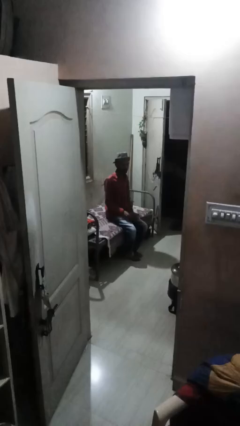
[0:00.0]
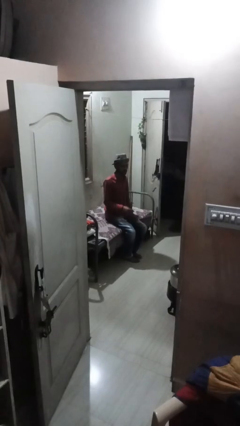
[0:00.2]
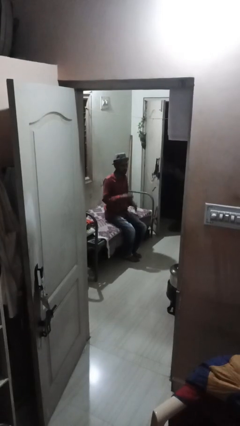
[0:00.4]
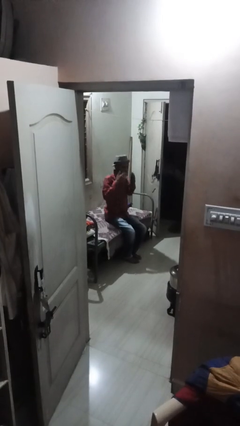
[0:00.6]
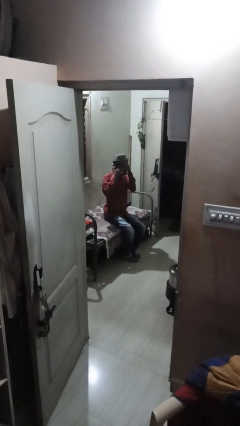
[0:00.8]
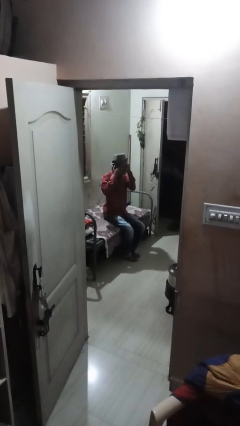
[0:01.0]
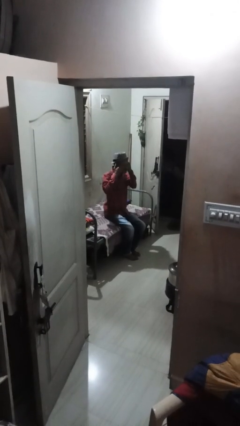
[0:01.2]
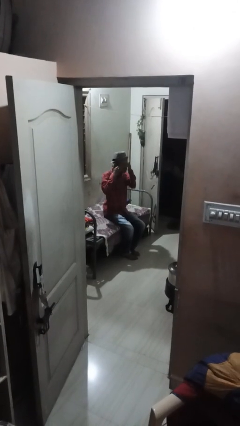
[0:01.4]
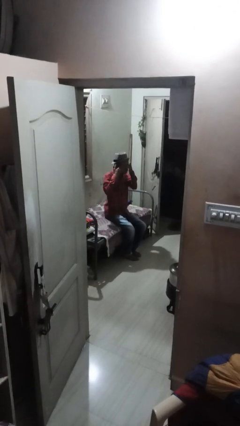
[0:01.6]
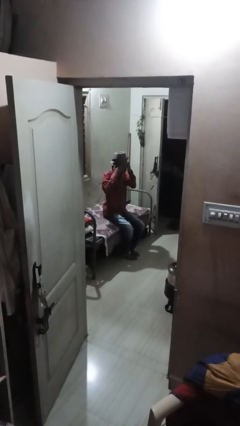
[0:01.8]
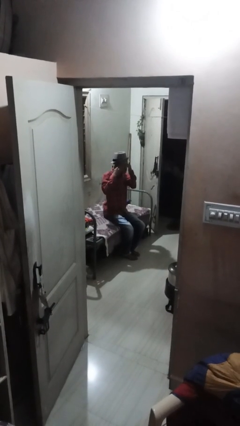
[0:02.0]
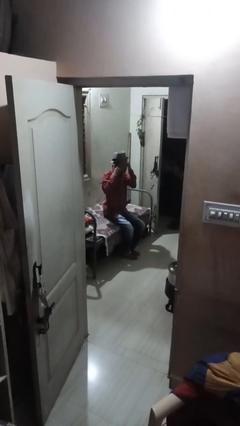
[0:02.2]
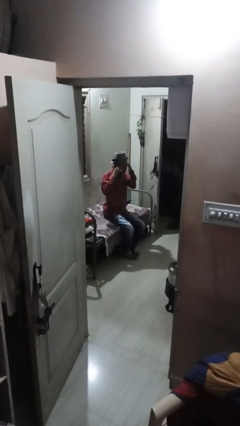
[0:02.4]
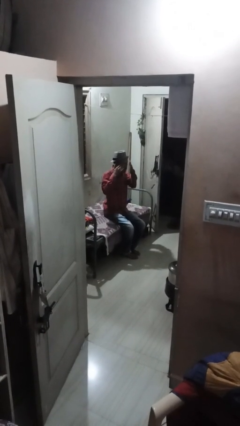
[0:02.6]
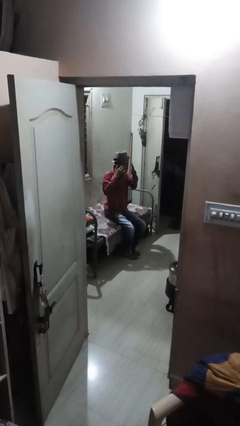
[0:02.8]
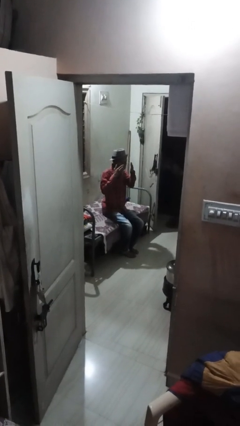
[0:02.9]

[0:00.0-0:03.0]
person rubs eyes

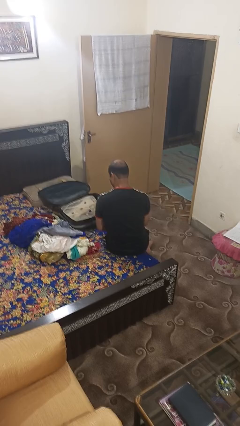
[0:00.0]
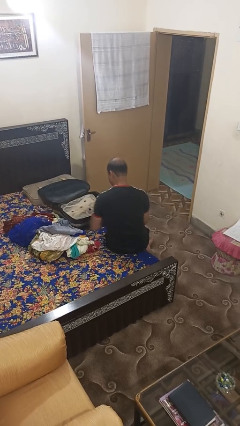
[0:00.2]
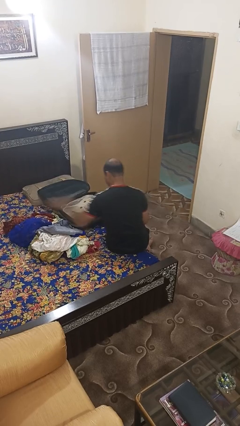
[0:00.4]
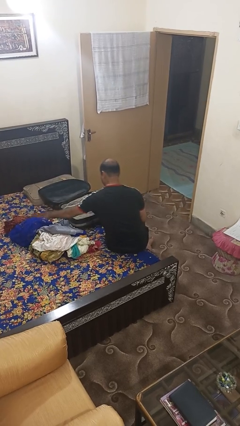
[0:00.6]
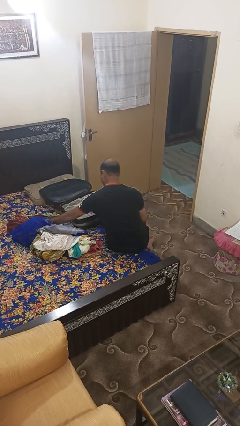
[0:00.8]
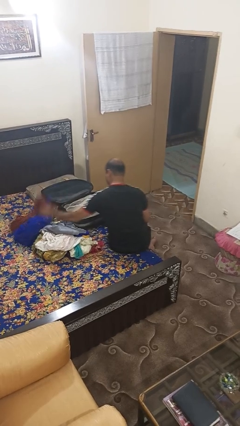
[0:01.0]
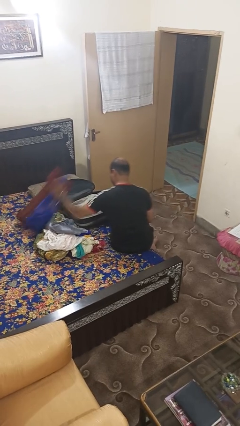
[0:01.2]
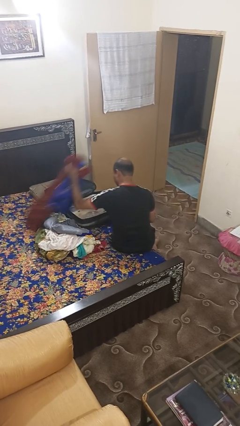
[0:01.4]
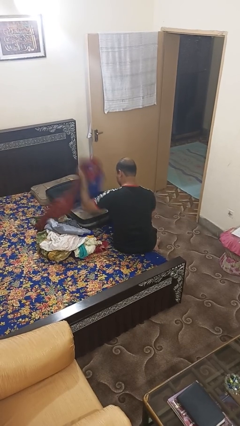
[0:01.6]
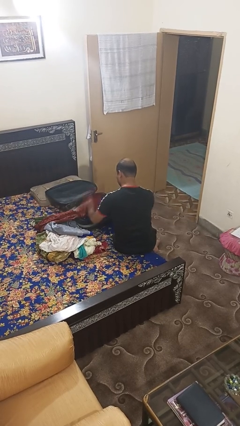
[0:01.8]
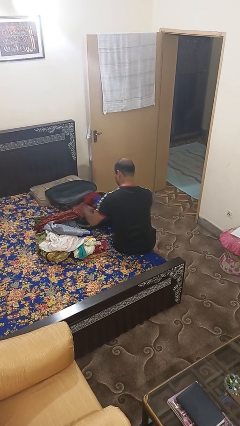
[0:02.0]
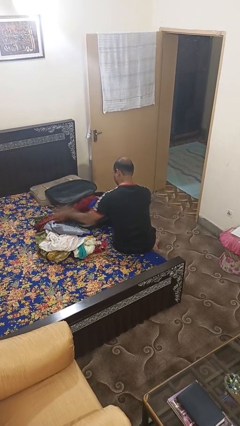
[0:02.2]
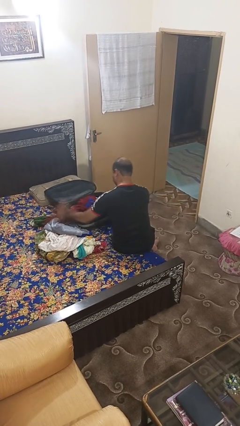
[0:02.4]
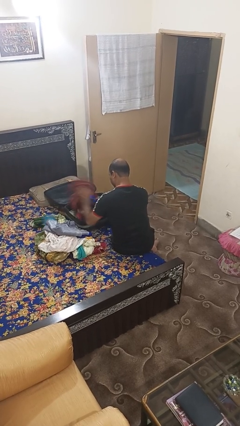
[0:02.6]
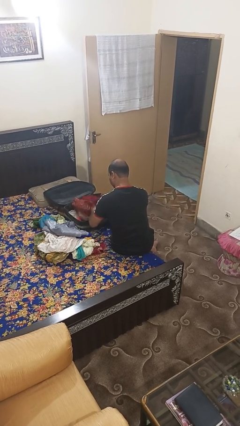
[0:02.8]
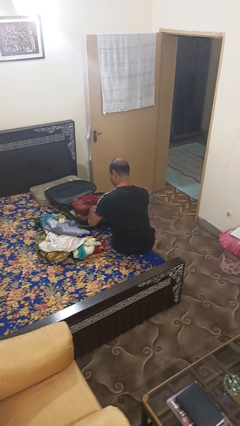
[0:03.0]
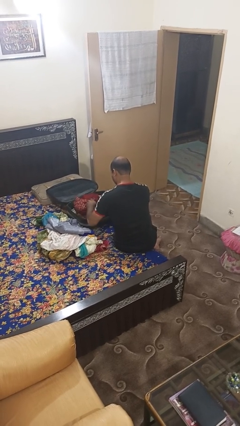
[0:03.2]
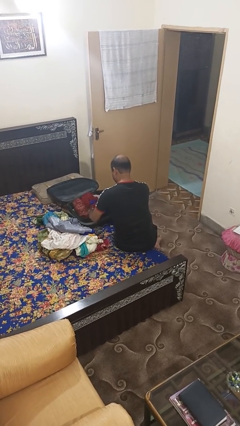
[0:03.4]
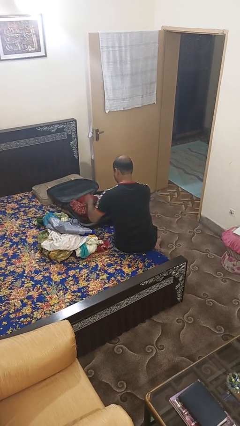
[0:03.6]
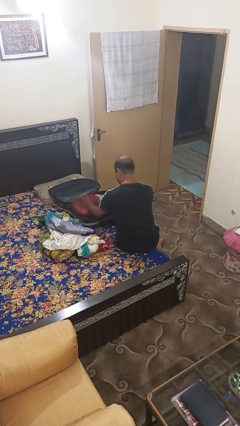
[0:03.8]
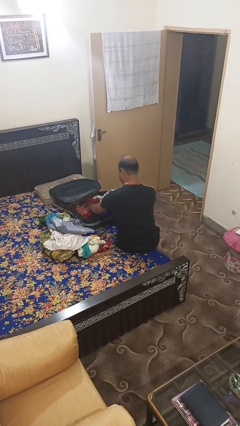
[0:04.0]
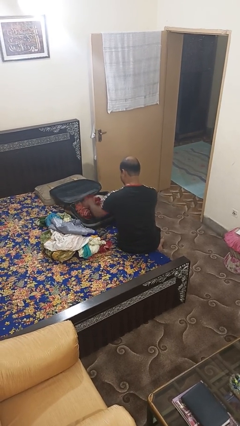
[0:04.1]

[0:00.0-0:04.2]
person loads clothes into suitcase

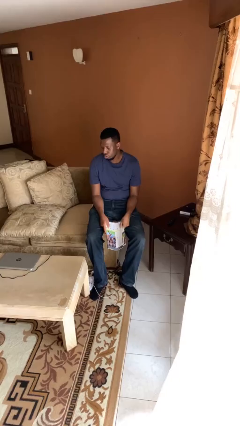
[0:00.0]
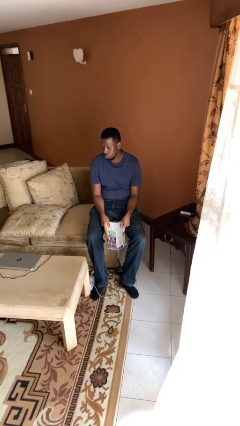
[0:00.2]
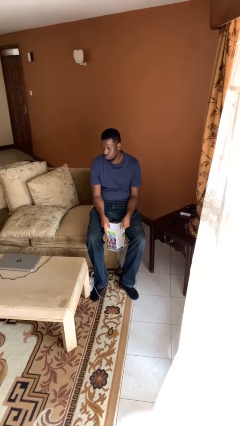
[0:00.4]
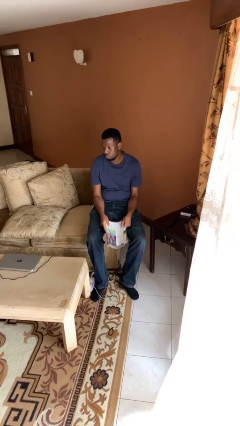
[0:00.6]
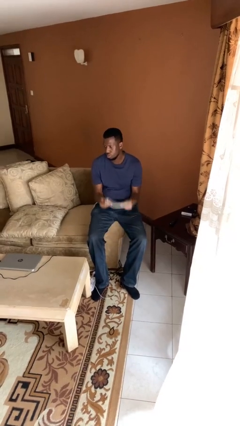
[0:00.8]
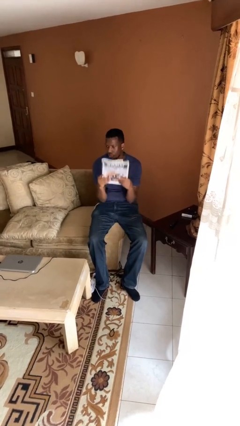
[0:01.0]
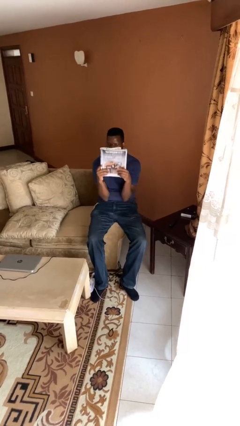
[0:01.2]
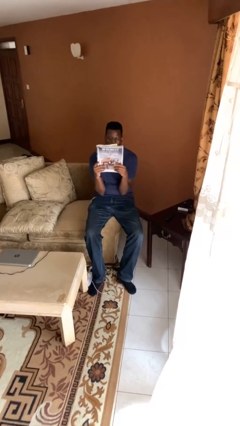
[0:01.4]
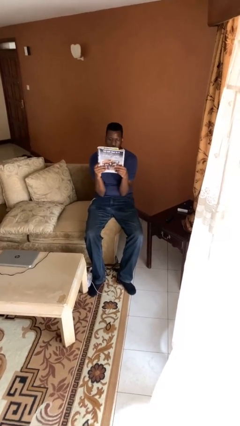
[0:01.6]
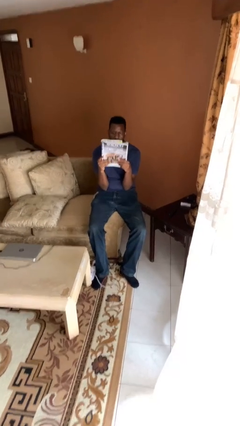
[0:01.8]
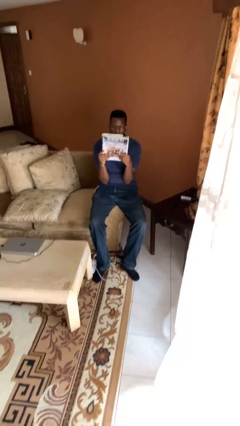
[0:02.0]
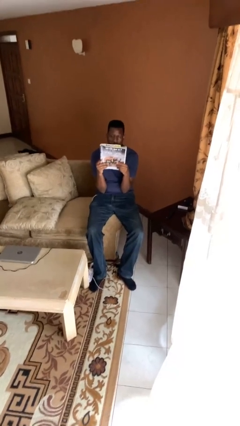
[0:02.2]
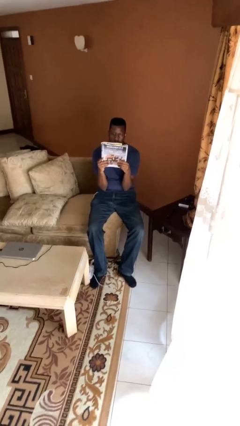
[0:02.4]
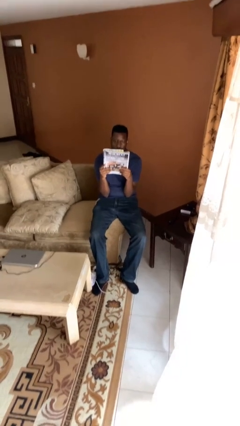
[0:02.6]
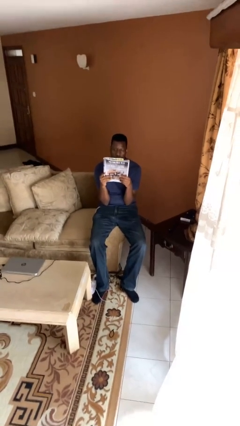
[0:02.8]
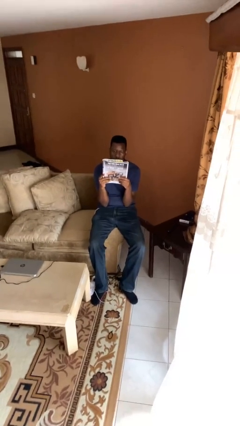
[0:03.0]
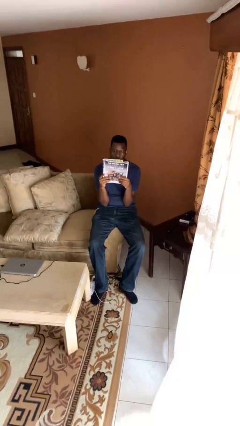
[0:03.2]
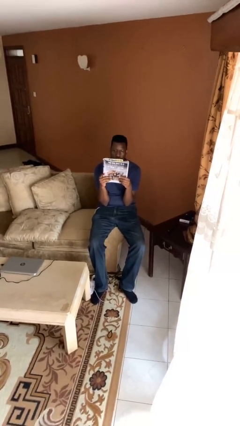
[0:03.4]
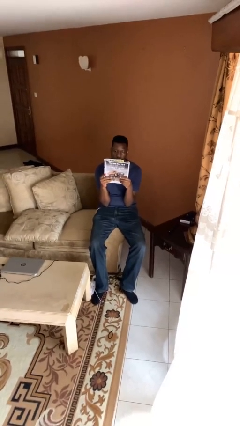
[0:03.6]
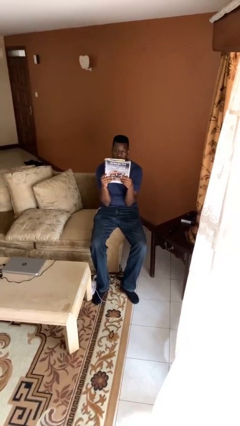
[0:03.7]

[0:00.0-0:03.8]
person reads document

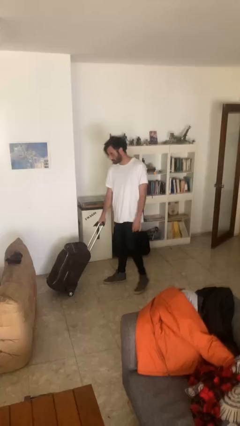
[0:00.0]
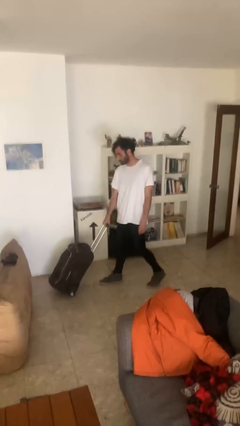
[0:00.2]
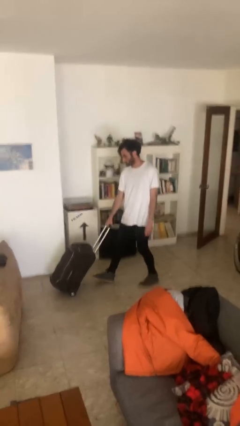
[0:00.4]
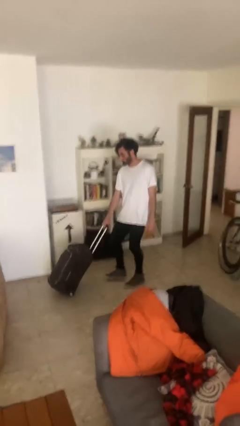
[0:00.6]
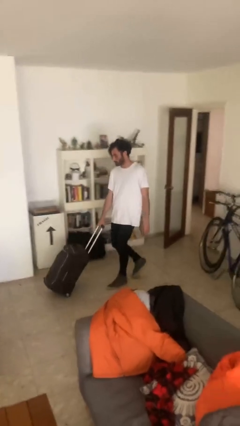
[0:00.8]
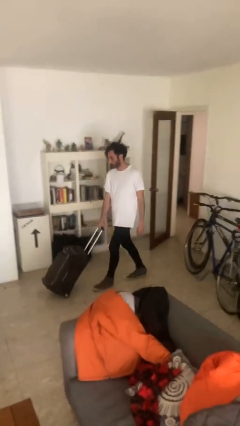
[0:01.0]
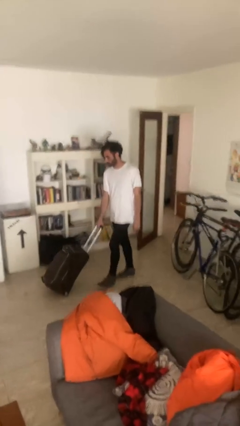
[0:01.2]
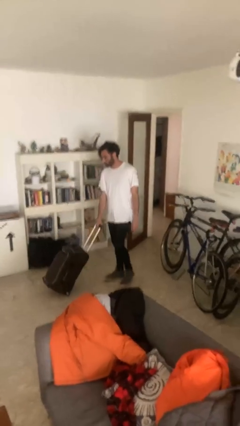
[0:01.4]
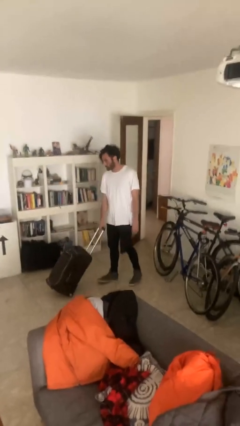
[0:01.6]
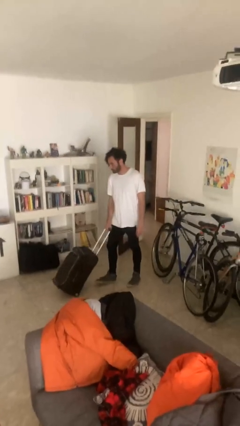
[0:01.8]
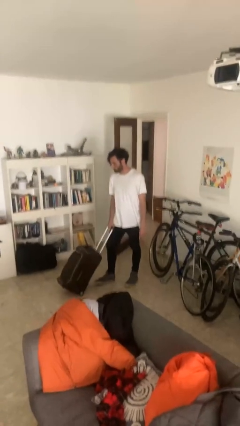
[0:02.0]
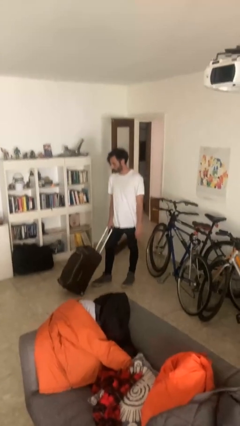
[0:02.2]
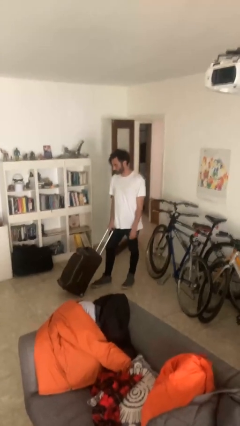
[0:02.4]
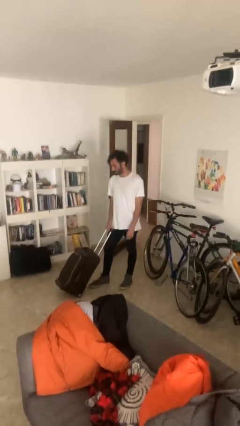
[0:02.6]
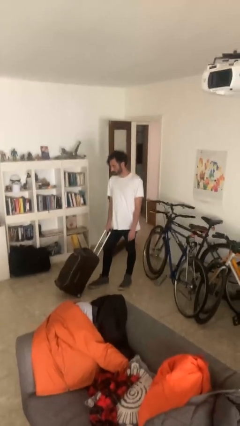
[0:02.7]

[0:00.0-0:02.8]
person pulls wheeled cart

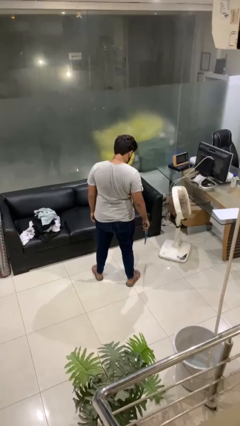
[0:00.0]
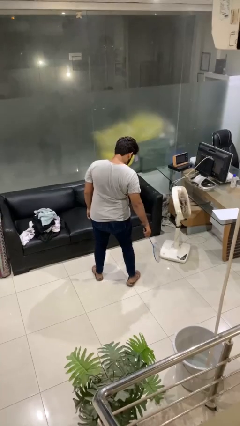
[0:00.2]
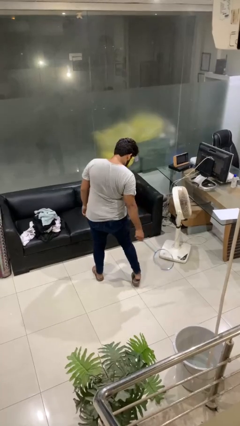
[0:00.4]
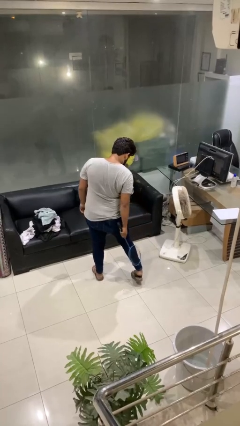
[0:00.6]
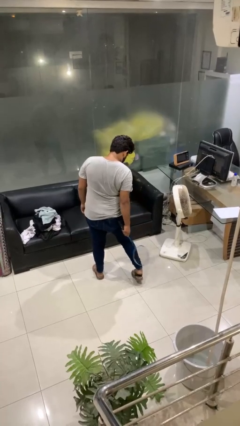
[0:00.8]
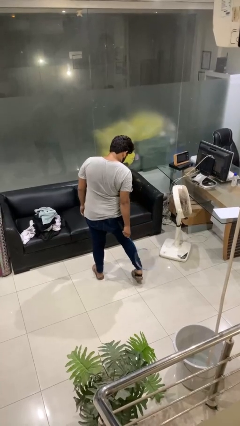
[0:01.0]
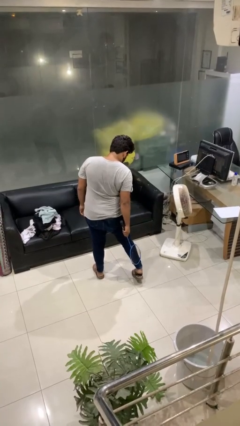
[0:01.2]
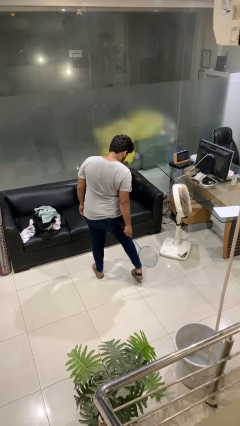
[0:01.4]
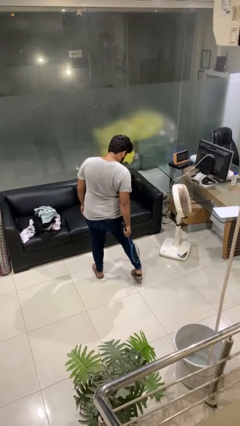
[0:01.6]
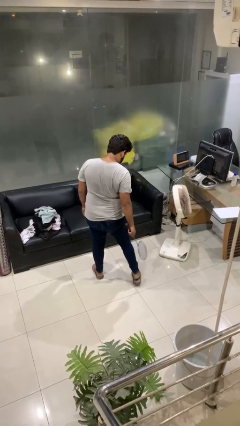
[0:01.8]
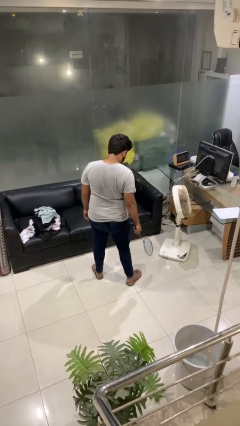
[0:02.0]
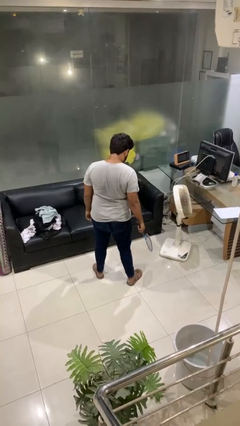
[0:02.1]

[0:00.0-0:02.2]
person swats bug

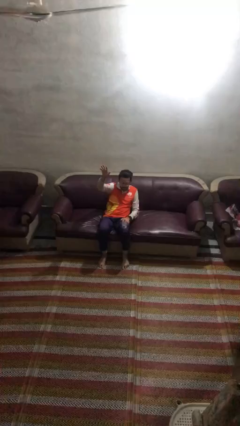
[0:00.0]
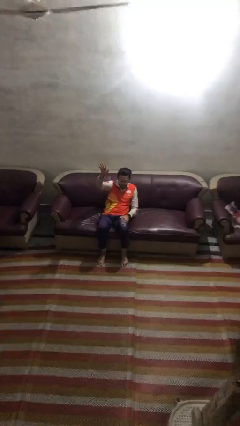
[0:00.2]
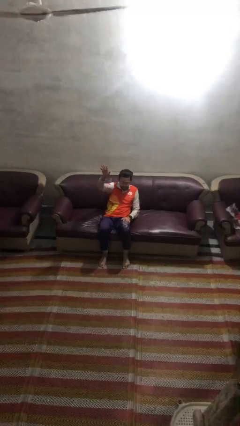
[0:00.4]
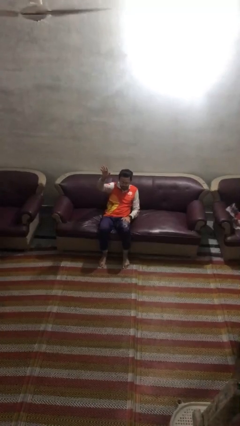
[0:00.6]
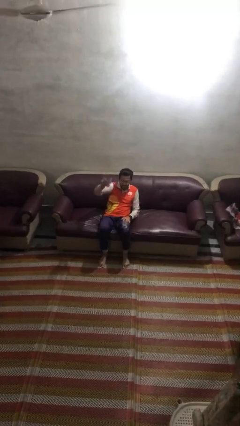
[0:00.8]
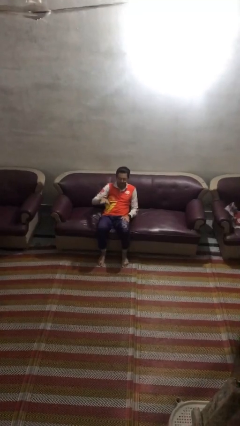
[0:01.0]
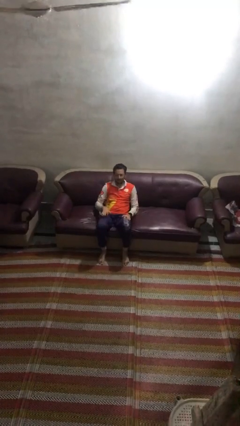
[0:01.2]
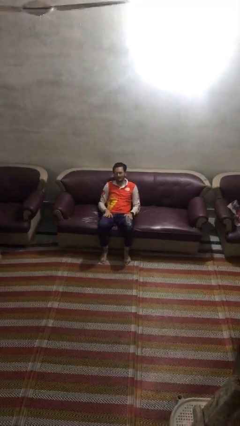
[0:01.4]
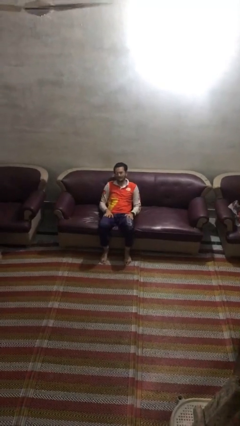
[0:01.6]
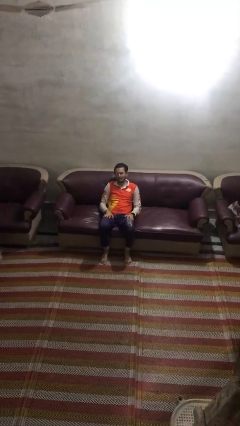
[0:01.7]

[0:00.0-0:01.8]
person gestures lower hand
